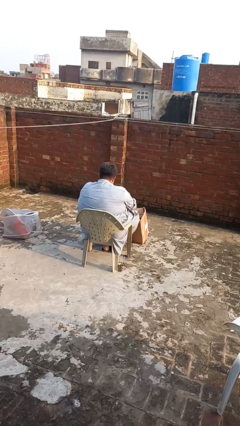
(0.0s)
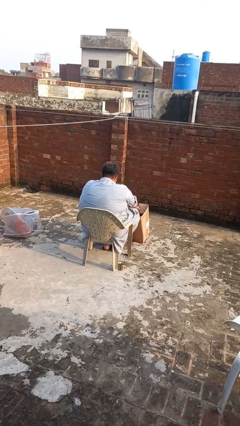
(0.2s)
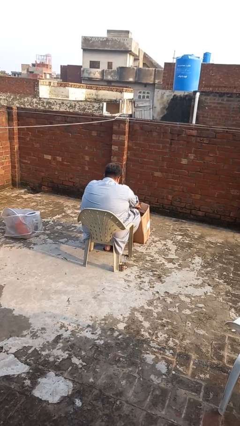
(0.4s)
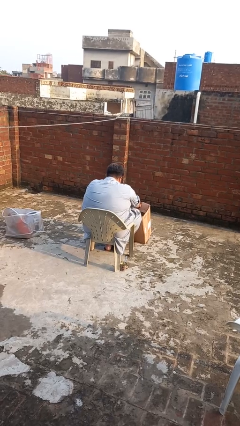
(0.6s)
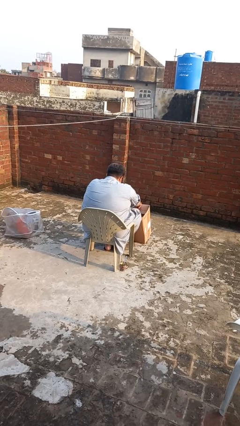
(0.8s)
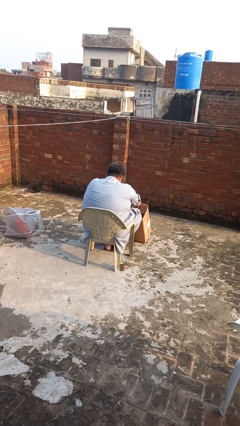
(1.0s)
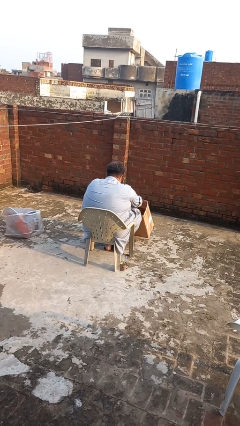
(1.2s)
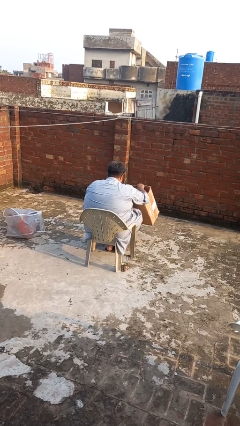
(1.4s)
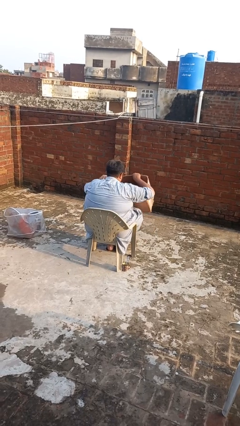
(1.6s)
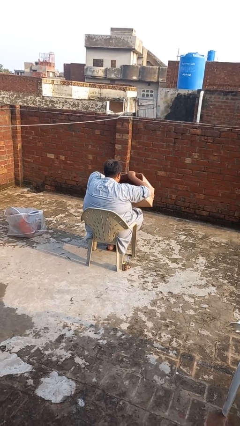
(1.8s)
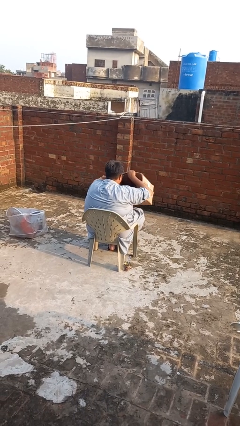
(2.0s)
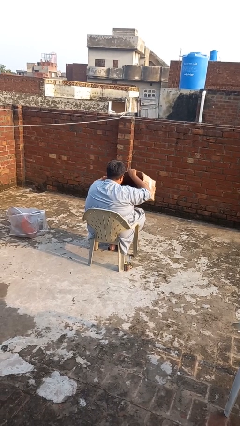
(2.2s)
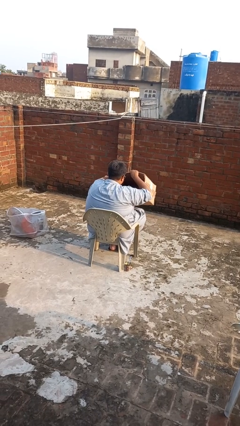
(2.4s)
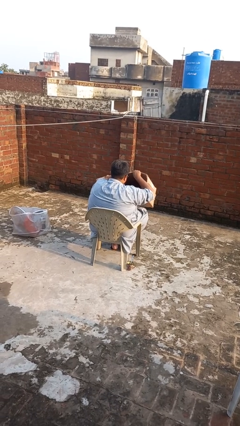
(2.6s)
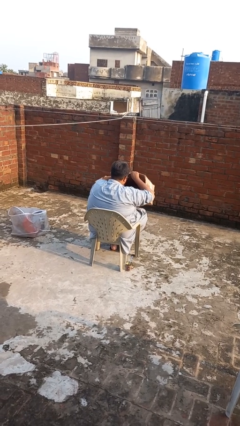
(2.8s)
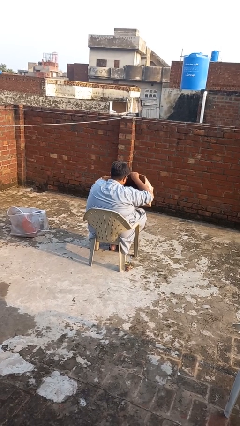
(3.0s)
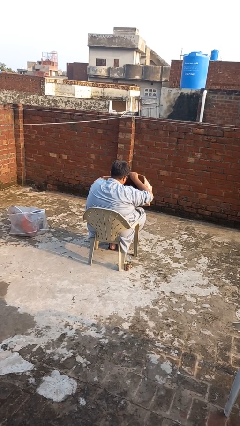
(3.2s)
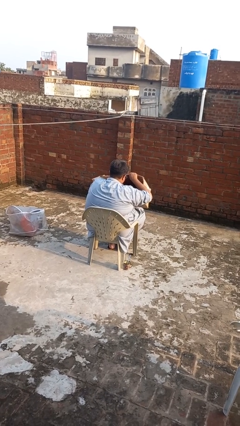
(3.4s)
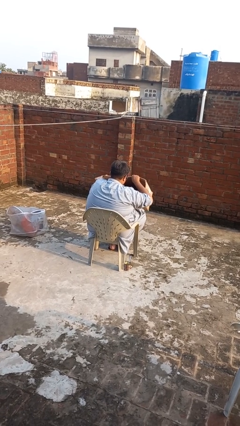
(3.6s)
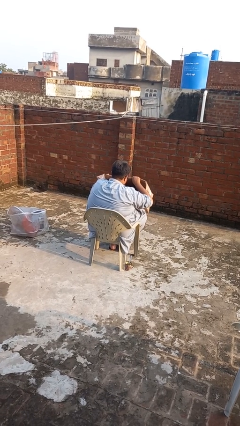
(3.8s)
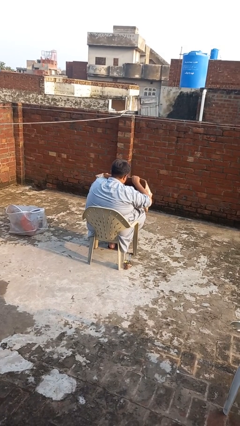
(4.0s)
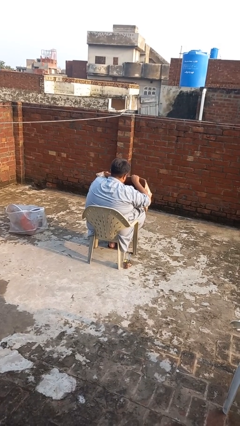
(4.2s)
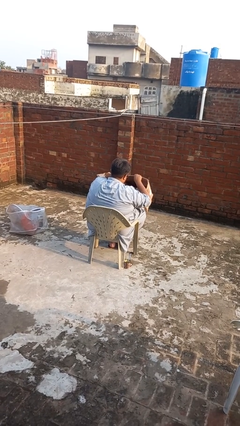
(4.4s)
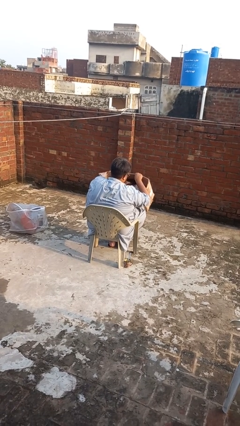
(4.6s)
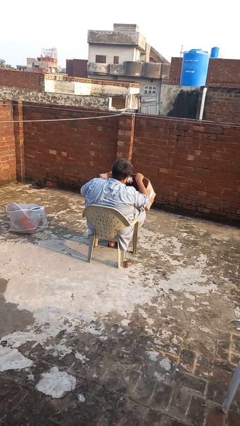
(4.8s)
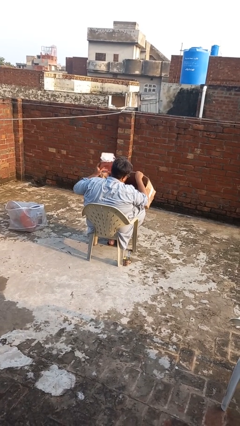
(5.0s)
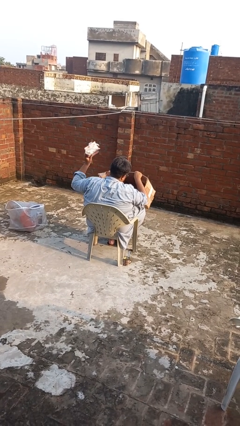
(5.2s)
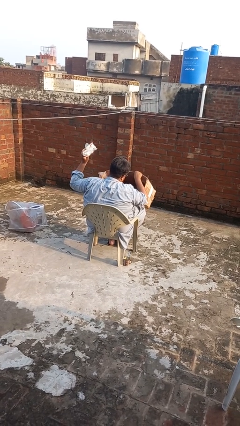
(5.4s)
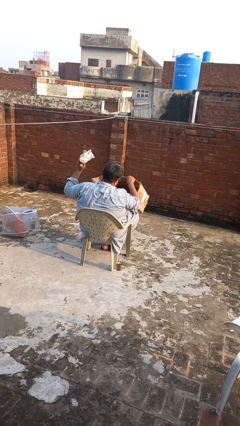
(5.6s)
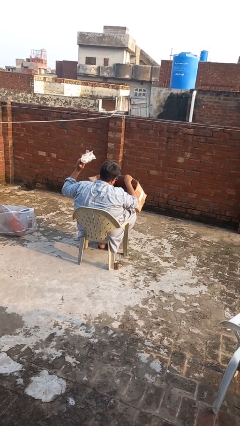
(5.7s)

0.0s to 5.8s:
person searches in box

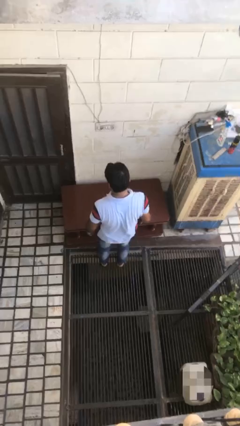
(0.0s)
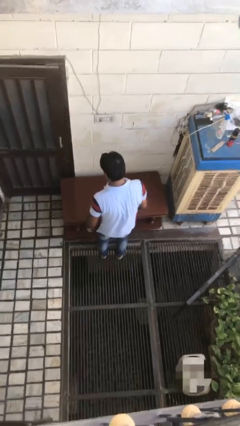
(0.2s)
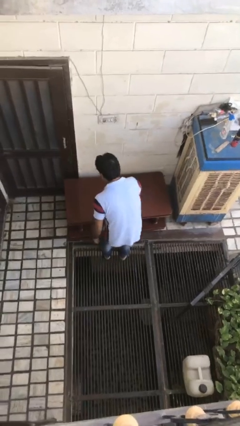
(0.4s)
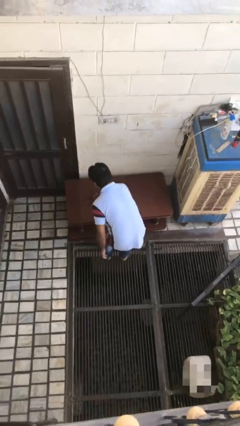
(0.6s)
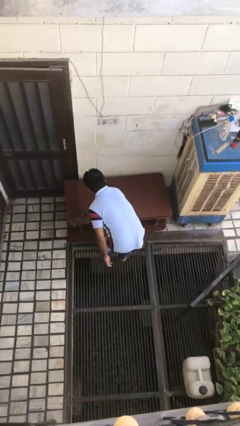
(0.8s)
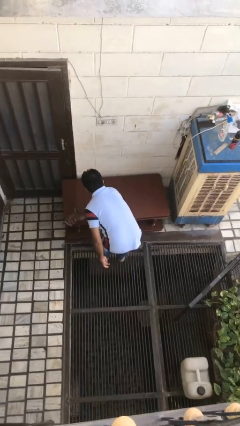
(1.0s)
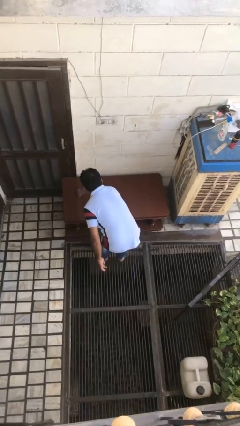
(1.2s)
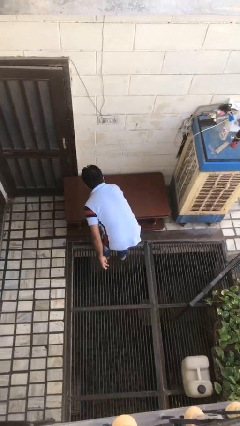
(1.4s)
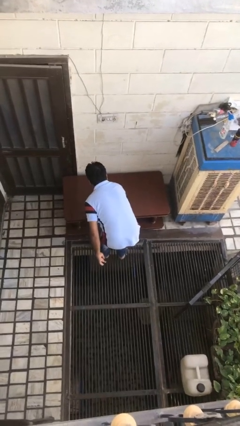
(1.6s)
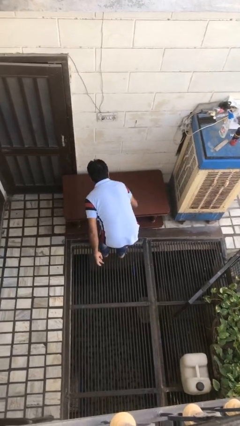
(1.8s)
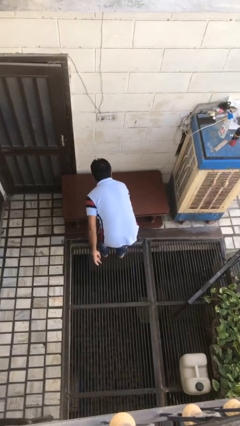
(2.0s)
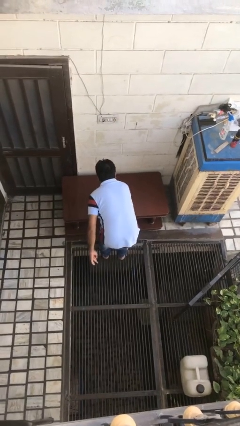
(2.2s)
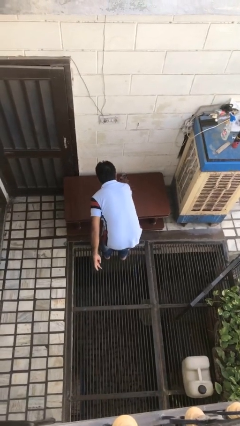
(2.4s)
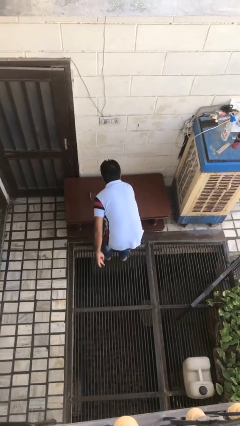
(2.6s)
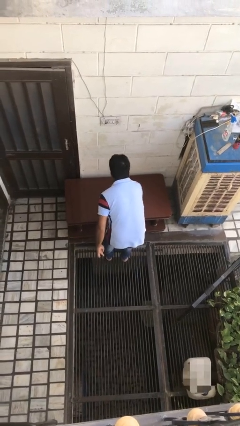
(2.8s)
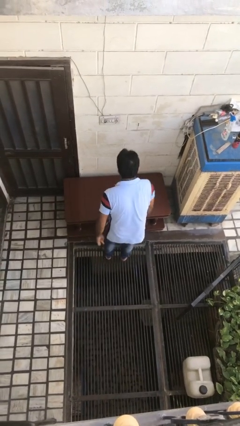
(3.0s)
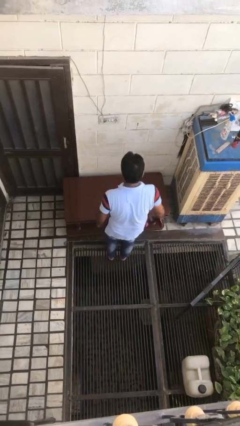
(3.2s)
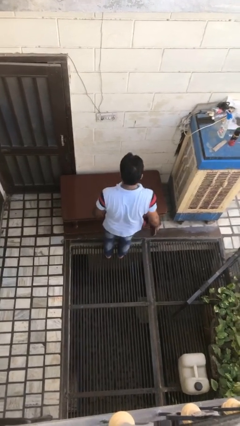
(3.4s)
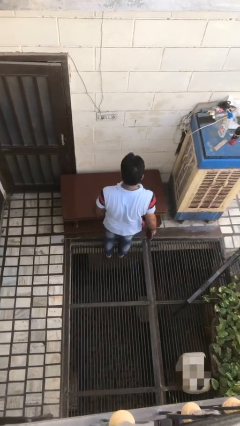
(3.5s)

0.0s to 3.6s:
person cleans table with rag

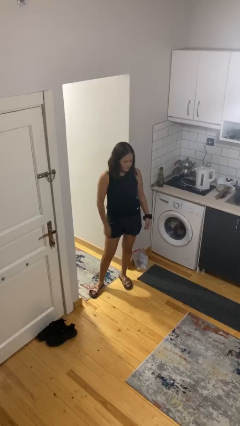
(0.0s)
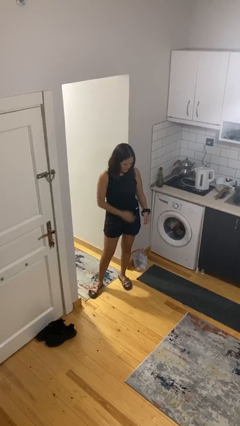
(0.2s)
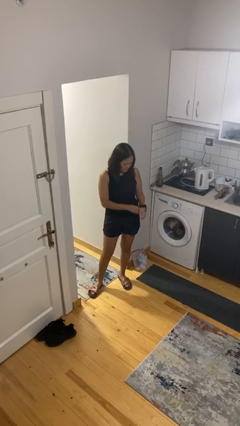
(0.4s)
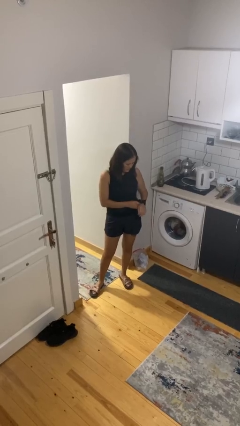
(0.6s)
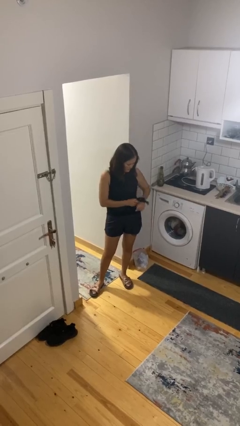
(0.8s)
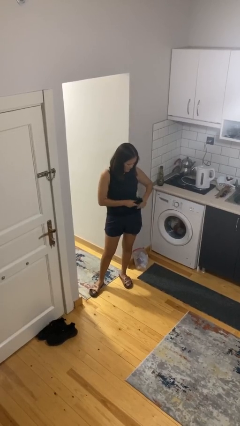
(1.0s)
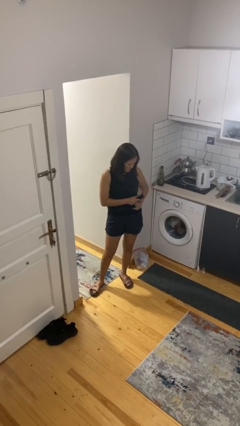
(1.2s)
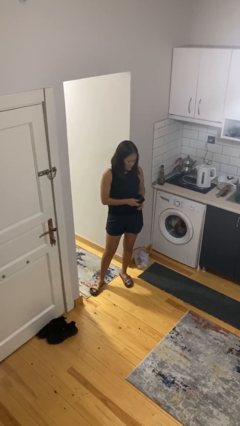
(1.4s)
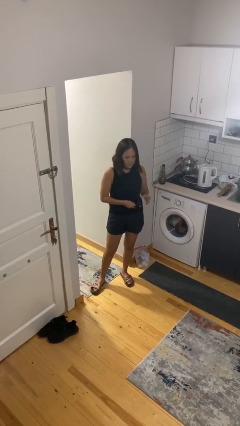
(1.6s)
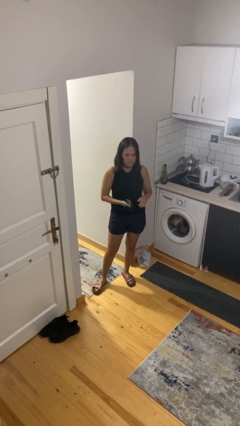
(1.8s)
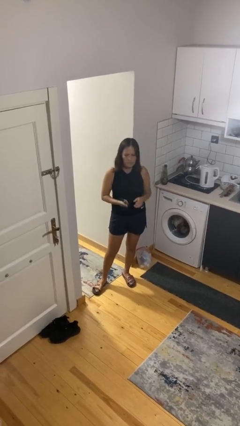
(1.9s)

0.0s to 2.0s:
person takes off wristwatch

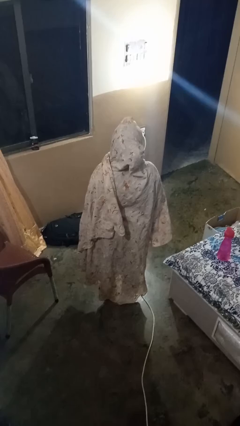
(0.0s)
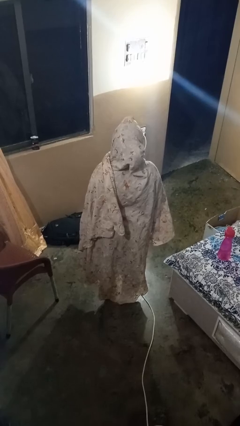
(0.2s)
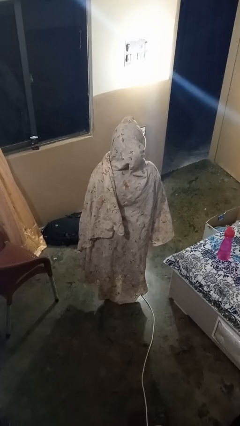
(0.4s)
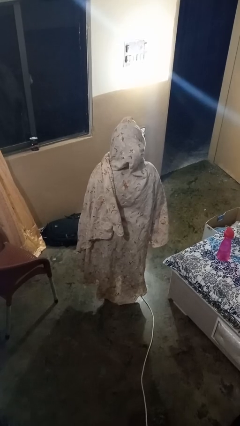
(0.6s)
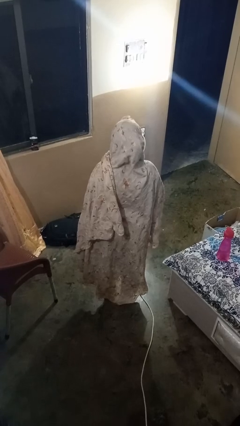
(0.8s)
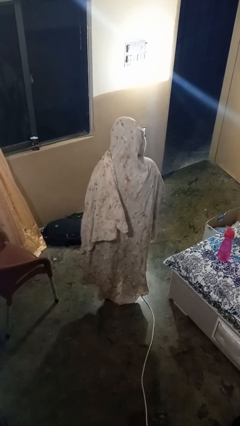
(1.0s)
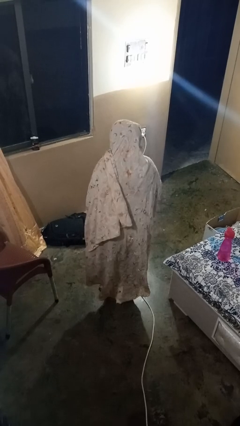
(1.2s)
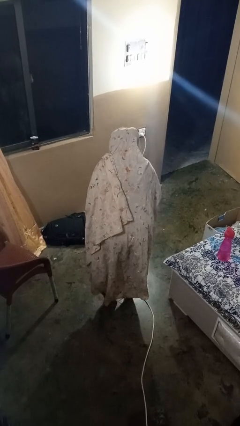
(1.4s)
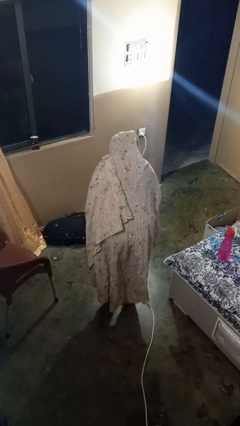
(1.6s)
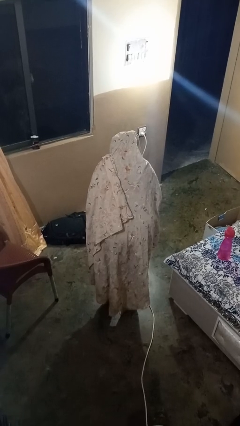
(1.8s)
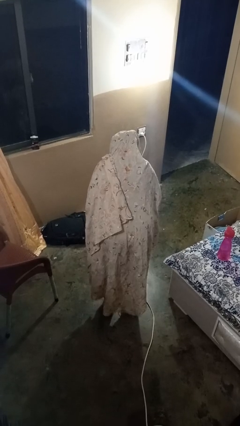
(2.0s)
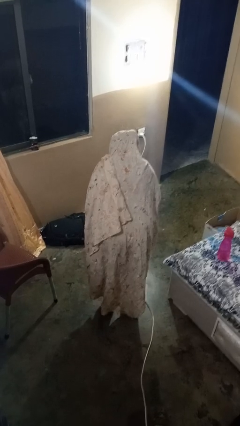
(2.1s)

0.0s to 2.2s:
person bows

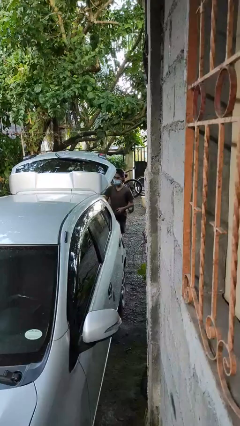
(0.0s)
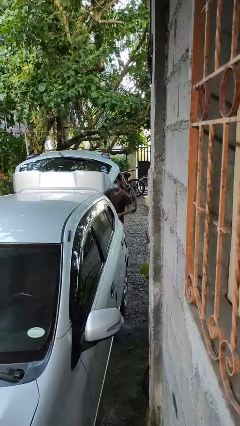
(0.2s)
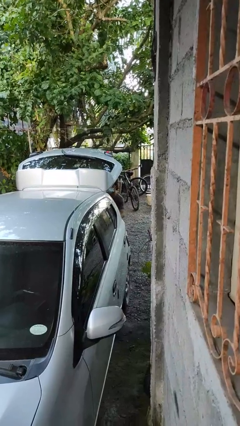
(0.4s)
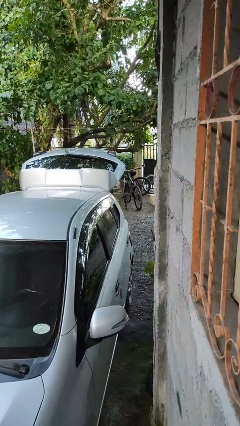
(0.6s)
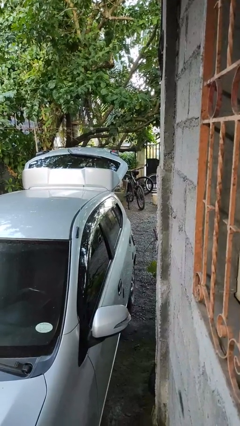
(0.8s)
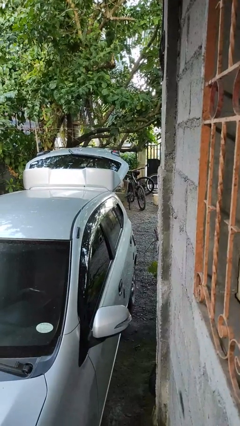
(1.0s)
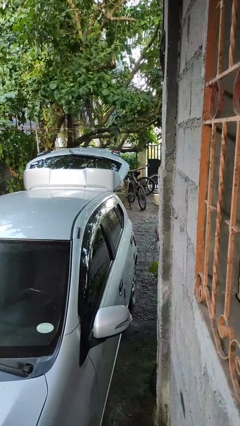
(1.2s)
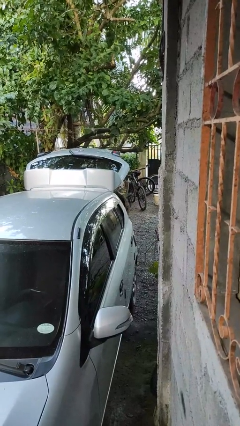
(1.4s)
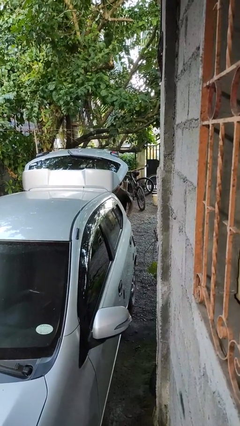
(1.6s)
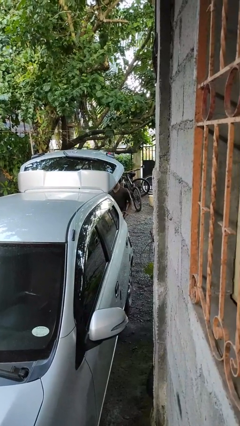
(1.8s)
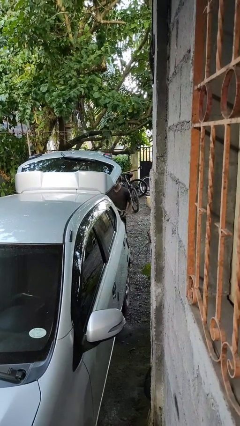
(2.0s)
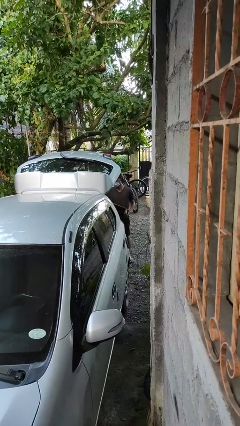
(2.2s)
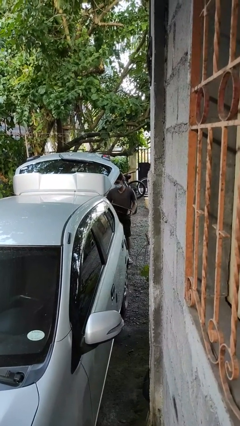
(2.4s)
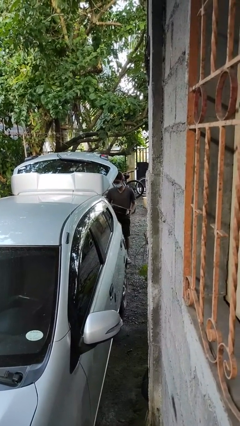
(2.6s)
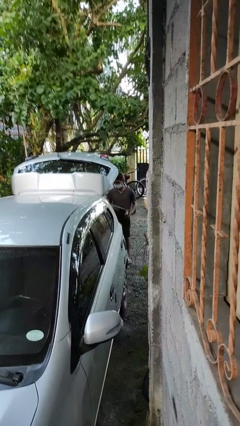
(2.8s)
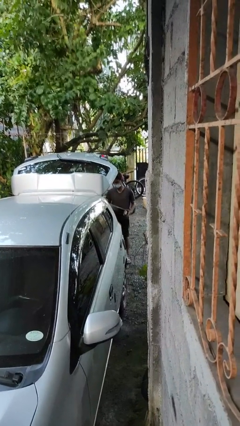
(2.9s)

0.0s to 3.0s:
person unloads car

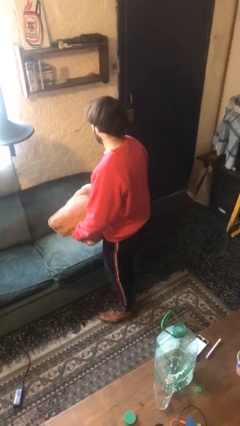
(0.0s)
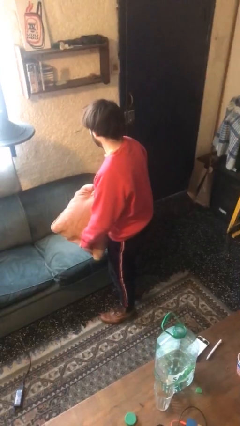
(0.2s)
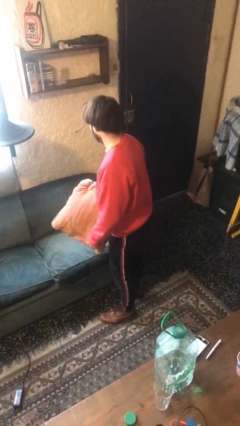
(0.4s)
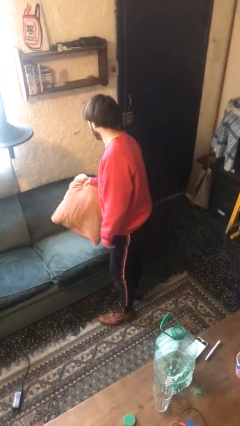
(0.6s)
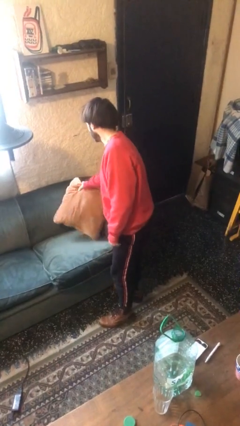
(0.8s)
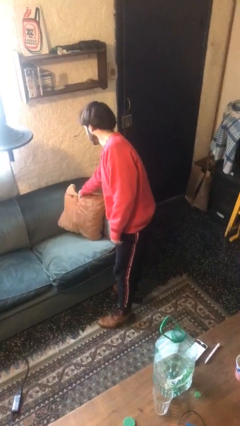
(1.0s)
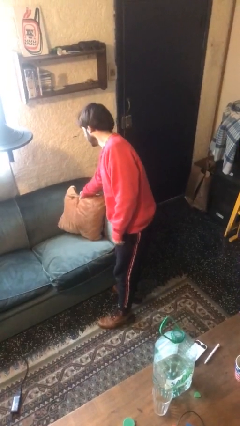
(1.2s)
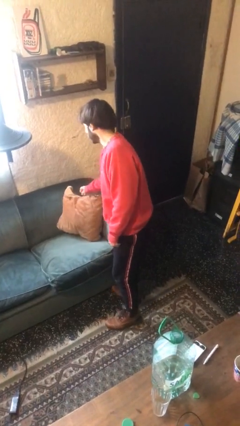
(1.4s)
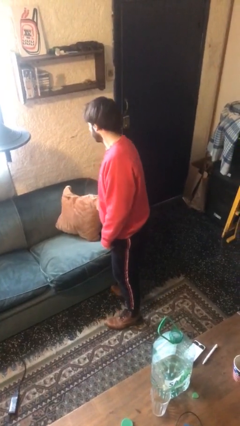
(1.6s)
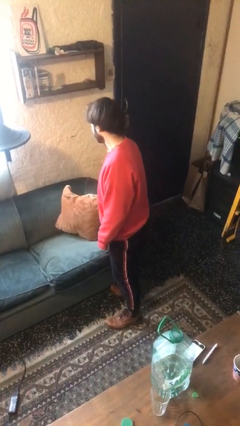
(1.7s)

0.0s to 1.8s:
person puts down object on couch
